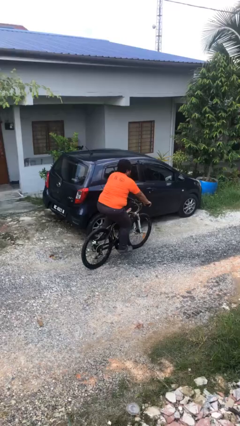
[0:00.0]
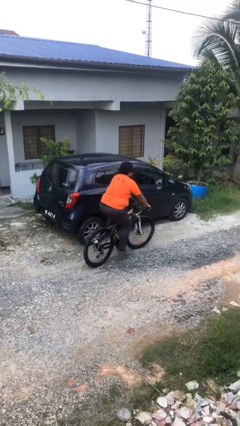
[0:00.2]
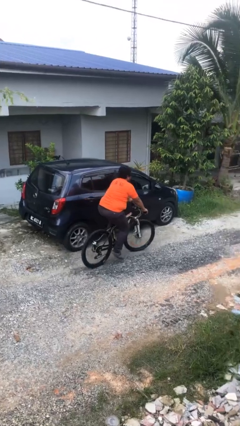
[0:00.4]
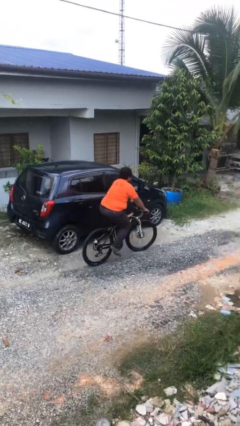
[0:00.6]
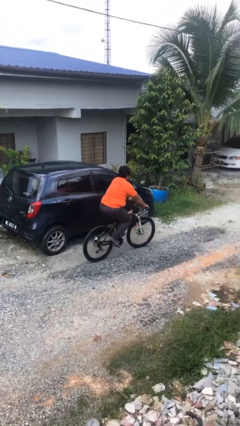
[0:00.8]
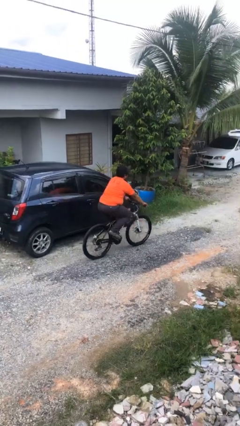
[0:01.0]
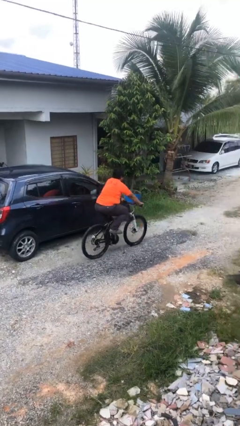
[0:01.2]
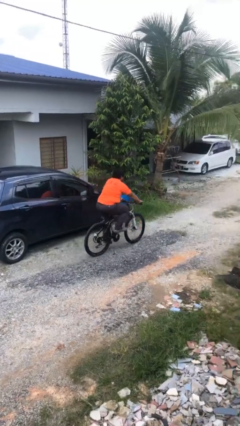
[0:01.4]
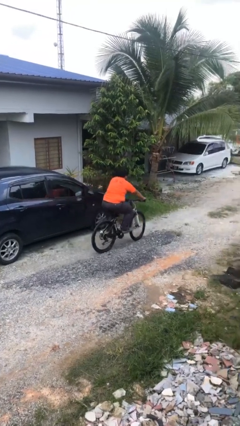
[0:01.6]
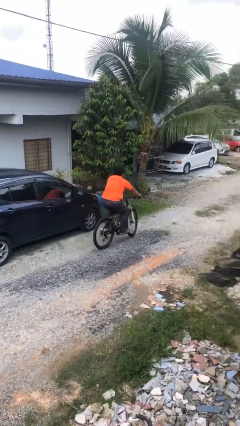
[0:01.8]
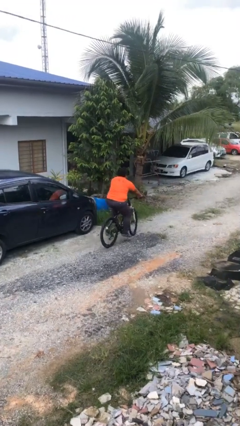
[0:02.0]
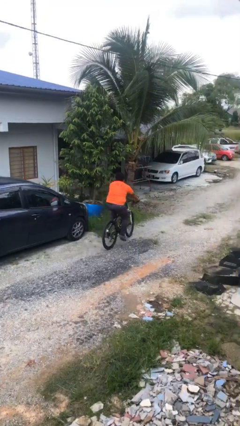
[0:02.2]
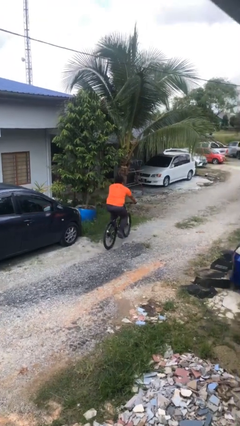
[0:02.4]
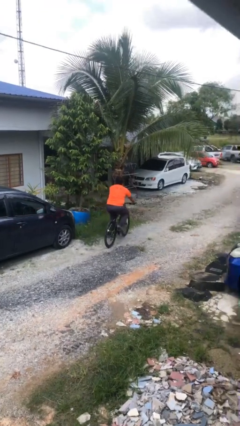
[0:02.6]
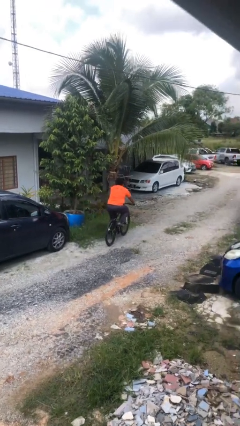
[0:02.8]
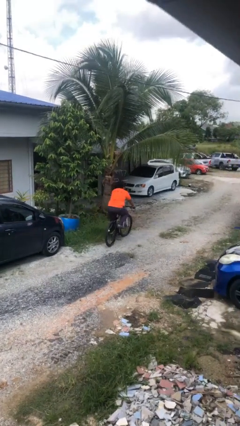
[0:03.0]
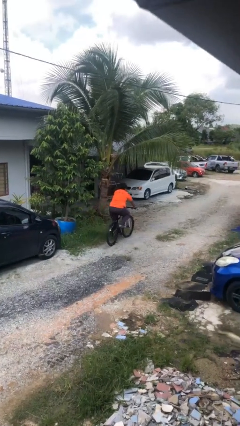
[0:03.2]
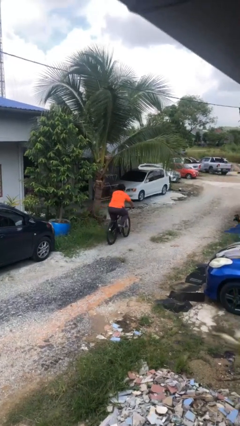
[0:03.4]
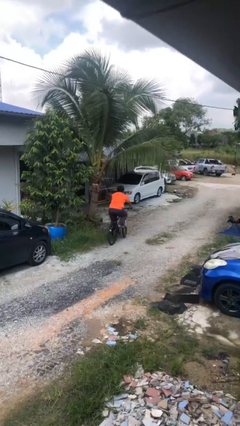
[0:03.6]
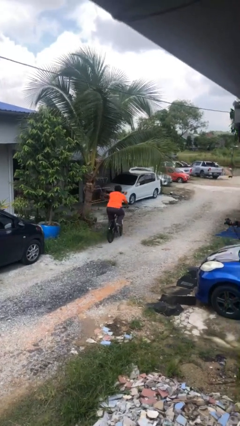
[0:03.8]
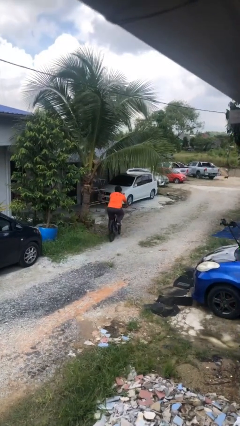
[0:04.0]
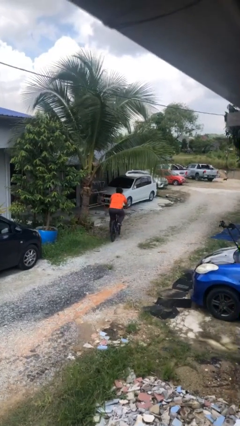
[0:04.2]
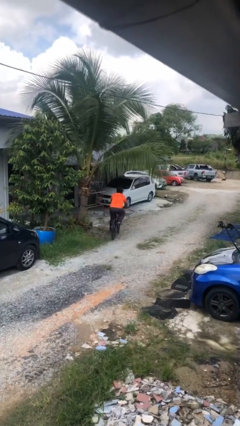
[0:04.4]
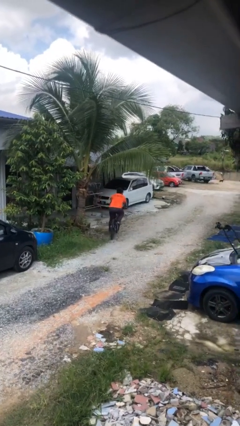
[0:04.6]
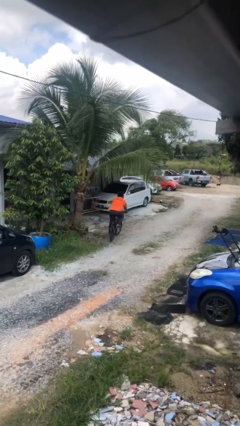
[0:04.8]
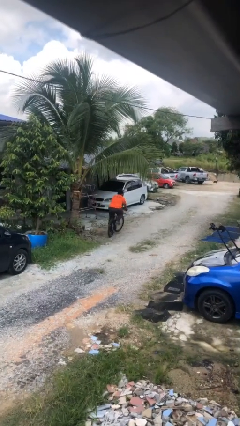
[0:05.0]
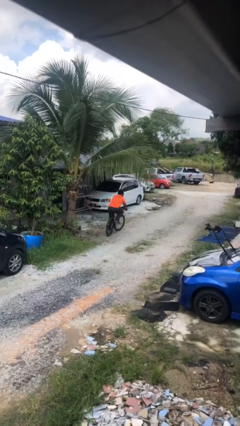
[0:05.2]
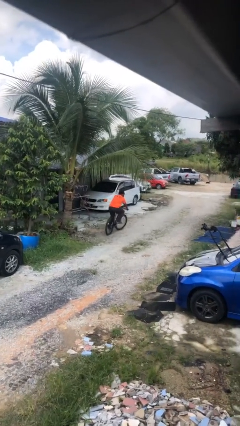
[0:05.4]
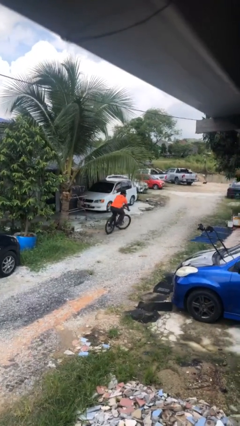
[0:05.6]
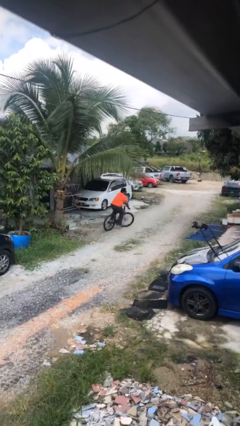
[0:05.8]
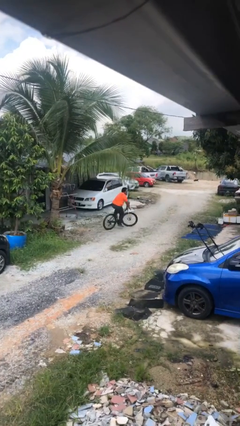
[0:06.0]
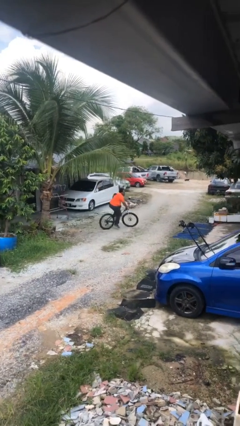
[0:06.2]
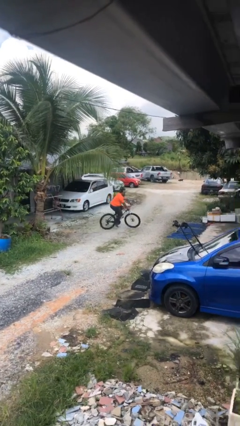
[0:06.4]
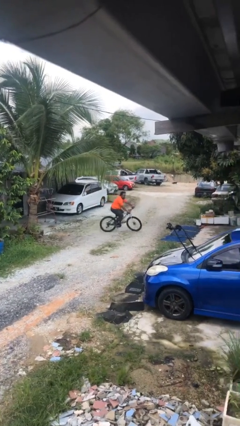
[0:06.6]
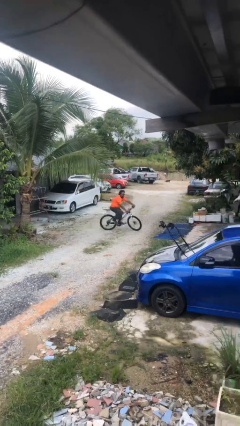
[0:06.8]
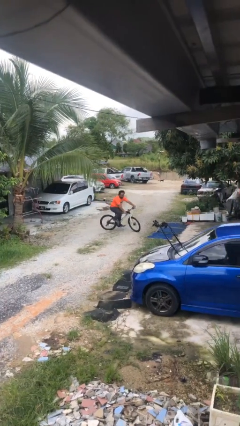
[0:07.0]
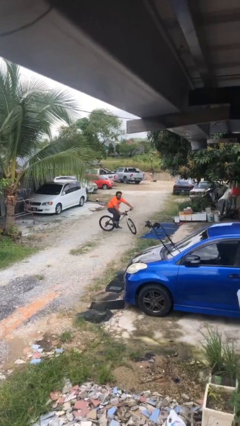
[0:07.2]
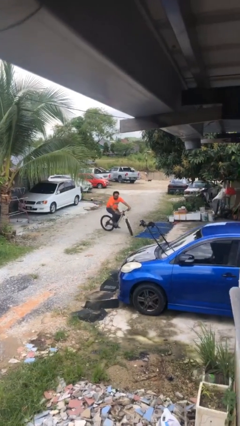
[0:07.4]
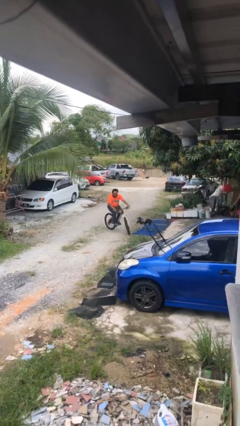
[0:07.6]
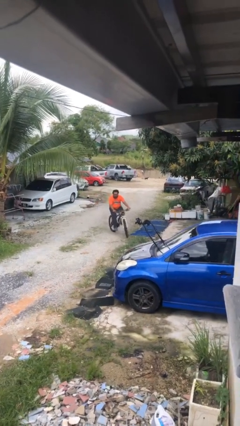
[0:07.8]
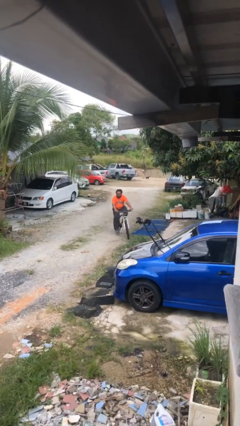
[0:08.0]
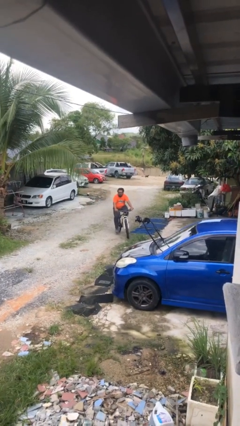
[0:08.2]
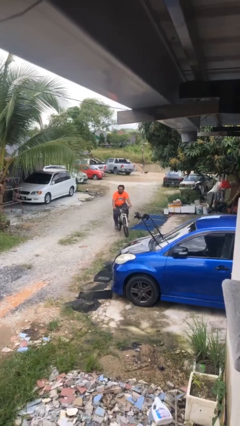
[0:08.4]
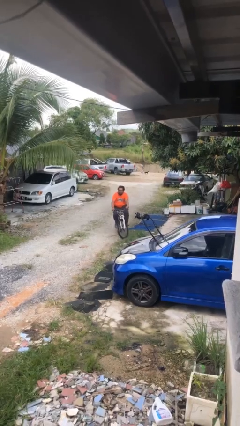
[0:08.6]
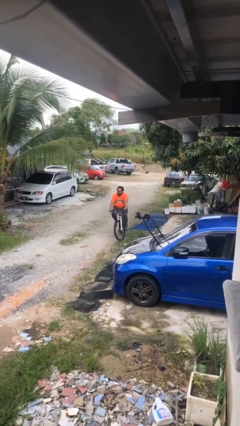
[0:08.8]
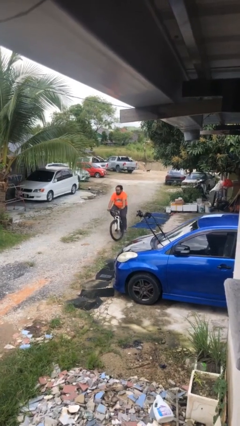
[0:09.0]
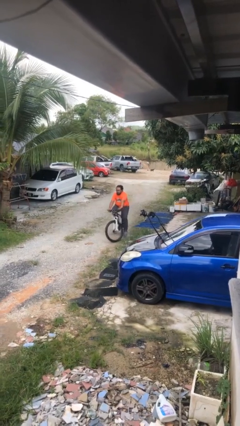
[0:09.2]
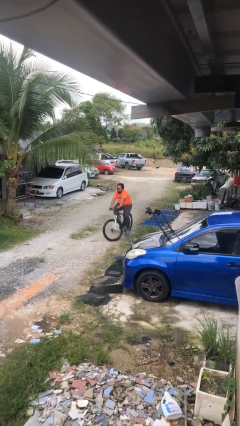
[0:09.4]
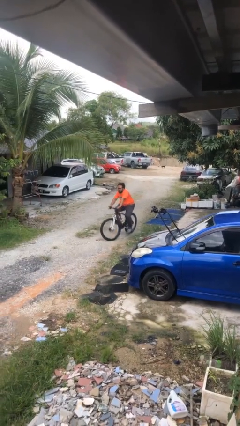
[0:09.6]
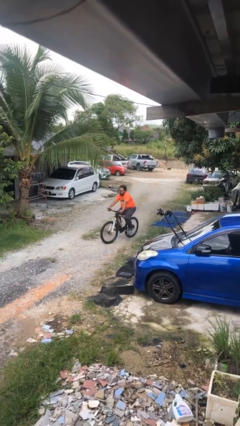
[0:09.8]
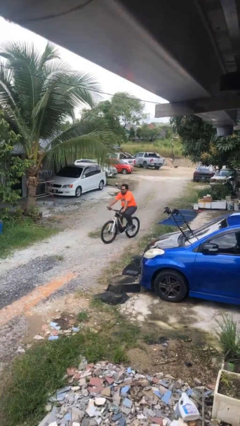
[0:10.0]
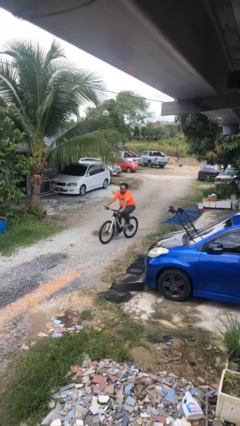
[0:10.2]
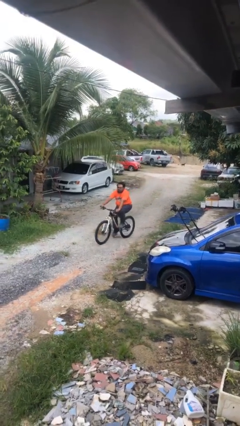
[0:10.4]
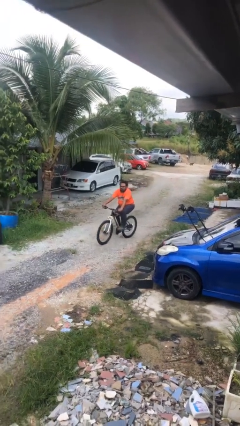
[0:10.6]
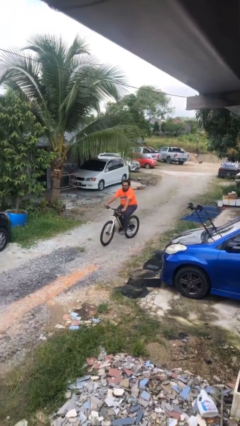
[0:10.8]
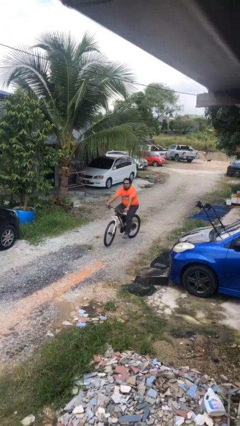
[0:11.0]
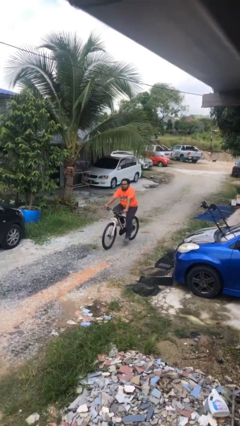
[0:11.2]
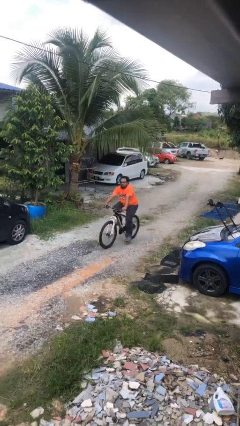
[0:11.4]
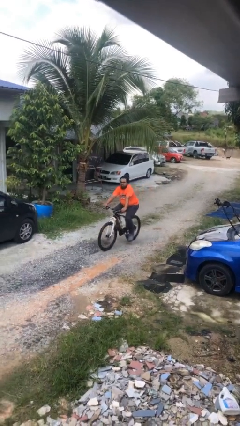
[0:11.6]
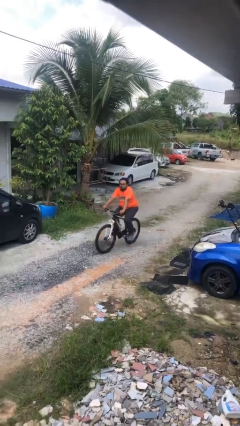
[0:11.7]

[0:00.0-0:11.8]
person rides bicycle

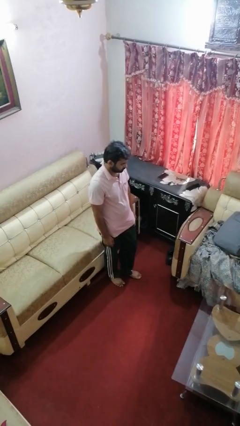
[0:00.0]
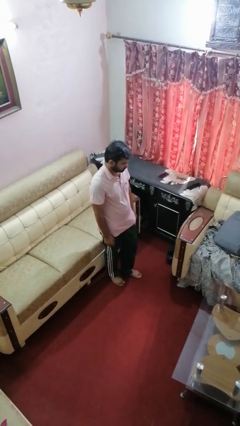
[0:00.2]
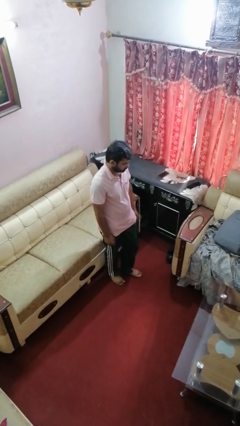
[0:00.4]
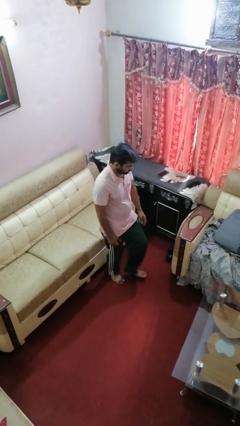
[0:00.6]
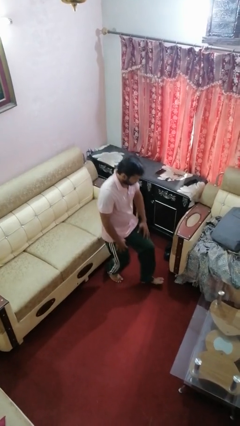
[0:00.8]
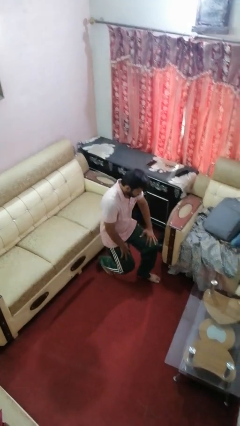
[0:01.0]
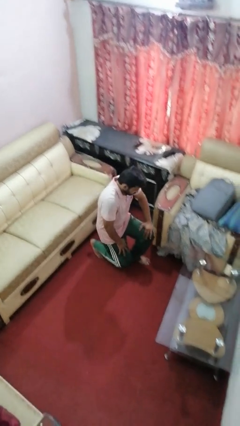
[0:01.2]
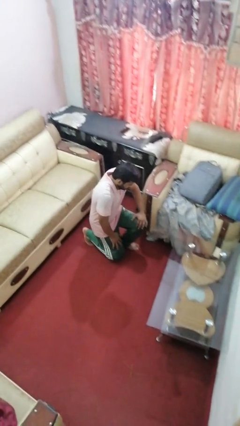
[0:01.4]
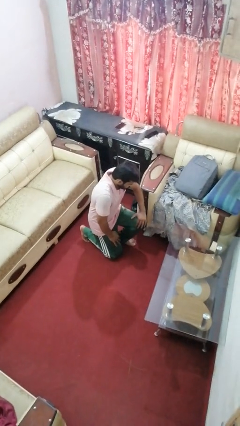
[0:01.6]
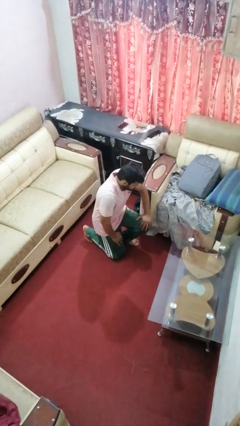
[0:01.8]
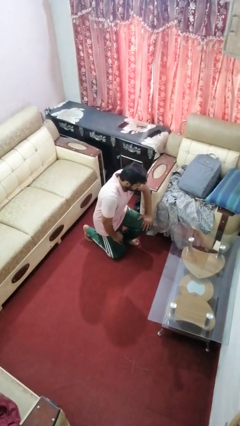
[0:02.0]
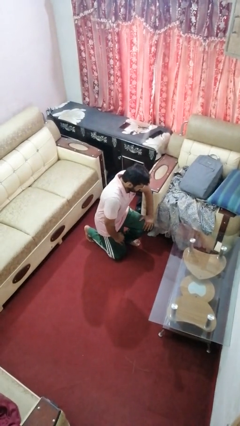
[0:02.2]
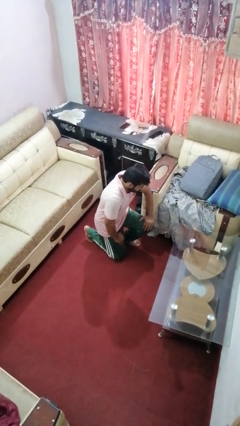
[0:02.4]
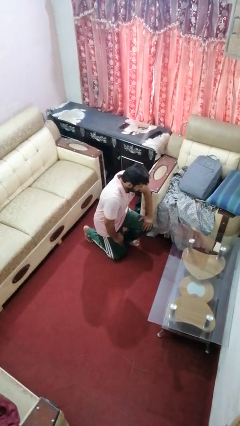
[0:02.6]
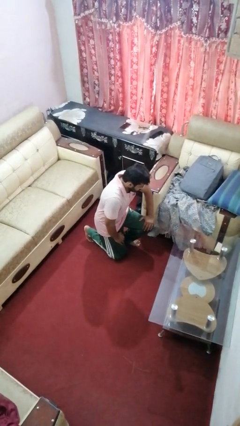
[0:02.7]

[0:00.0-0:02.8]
person kneels

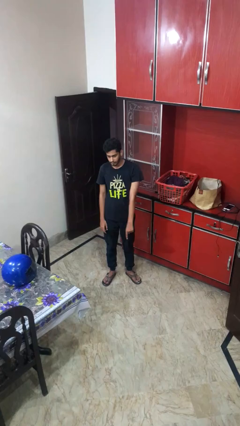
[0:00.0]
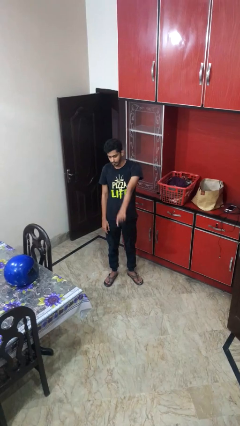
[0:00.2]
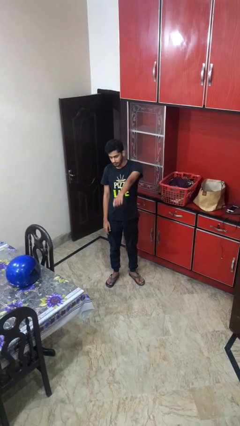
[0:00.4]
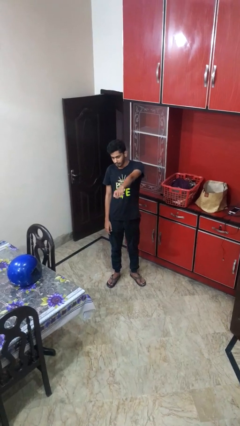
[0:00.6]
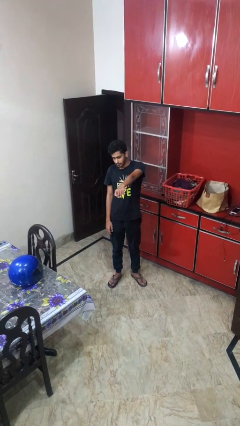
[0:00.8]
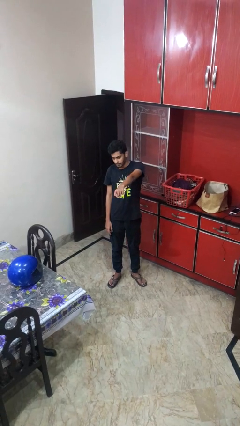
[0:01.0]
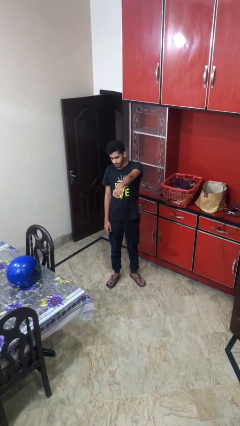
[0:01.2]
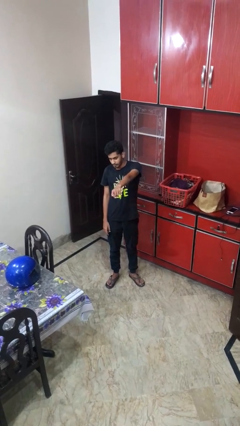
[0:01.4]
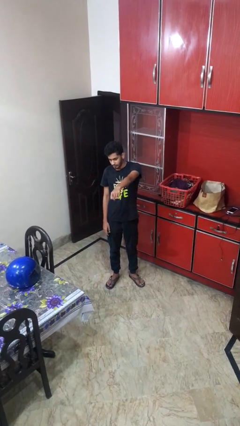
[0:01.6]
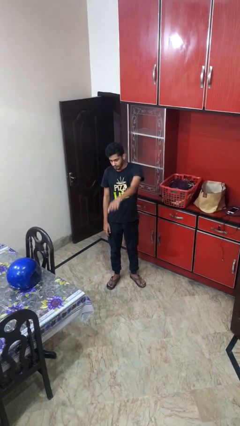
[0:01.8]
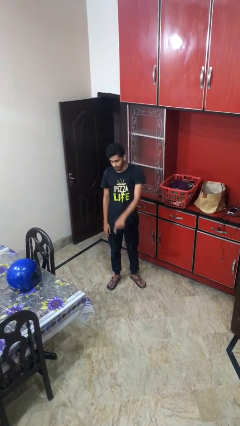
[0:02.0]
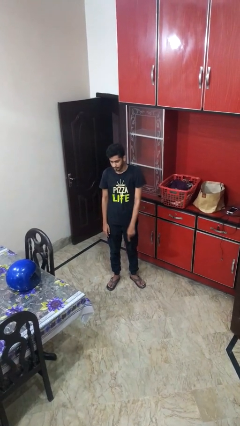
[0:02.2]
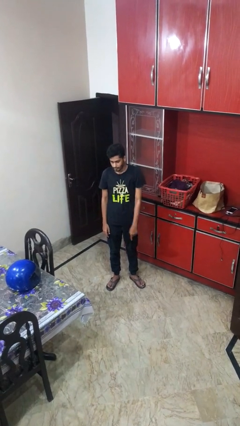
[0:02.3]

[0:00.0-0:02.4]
person points at person

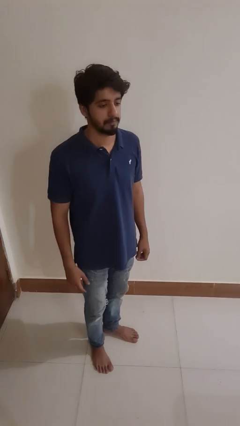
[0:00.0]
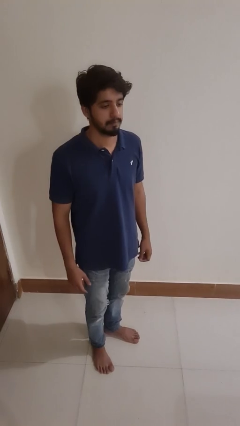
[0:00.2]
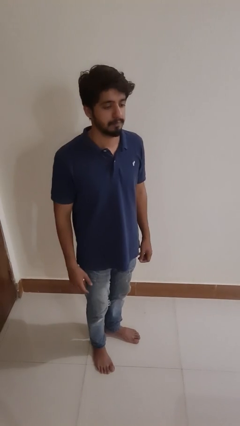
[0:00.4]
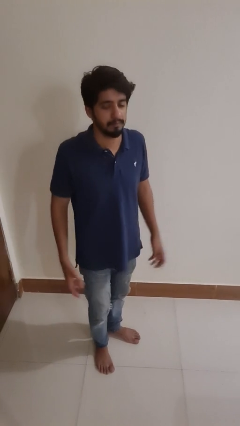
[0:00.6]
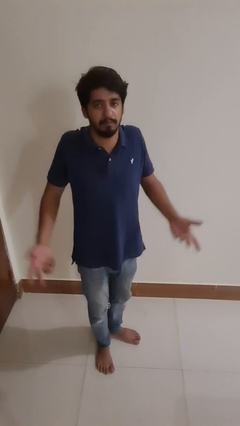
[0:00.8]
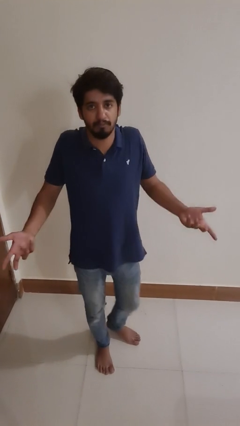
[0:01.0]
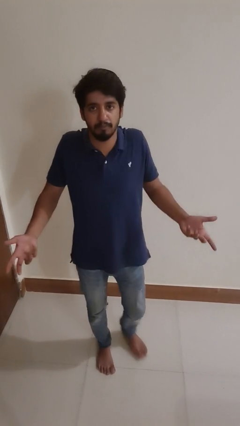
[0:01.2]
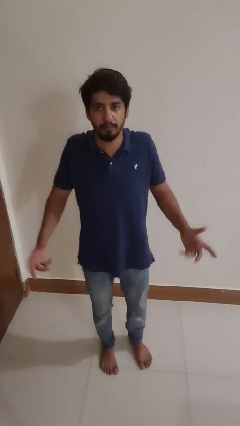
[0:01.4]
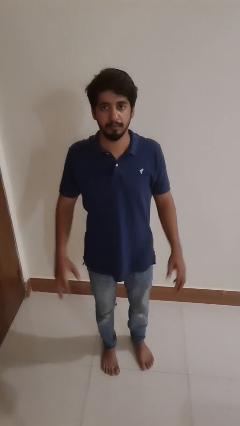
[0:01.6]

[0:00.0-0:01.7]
person shrugs
